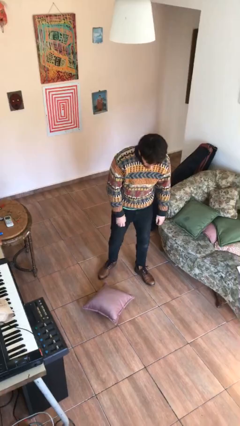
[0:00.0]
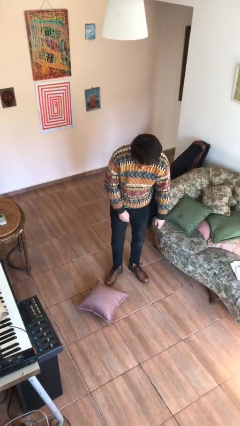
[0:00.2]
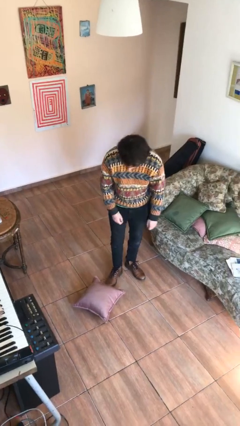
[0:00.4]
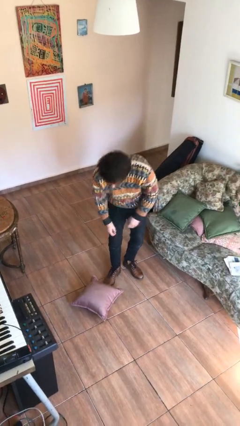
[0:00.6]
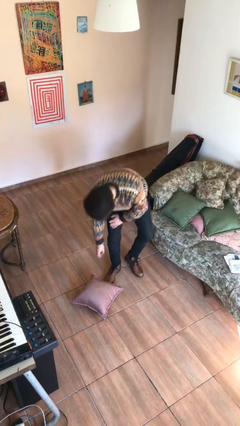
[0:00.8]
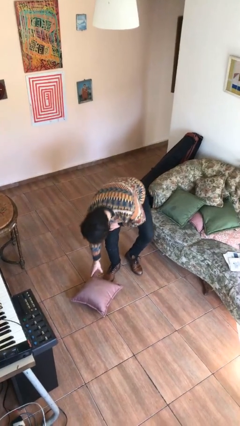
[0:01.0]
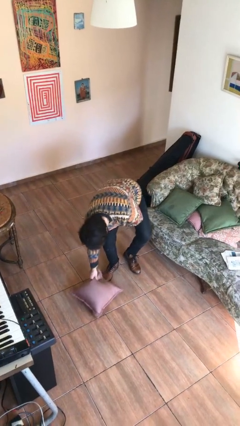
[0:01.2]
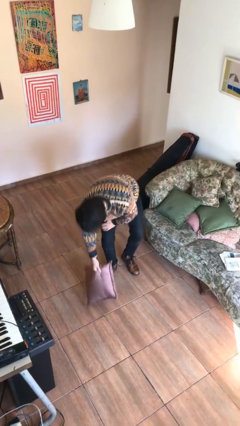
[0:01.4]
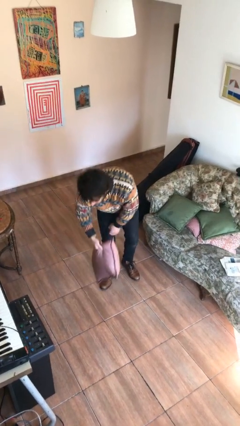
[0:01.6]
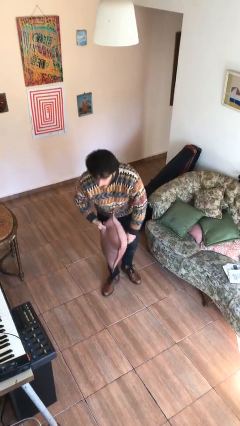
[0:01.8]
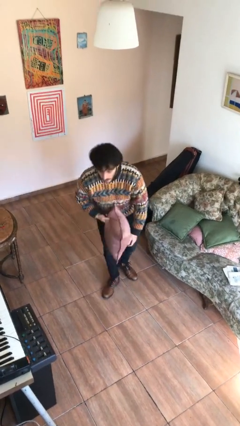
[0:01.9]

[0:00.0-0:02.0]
person picks up object from floor

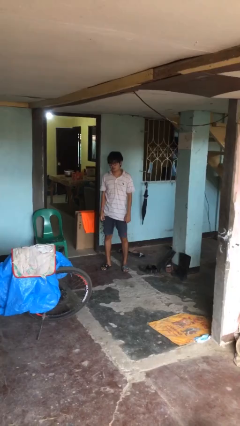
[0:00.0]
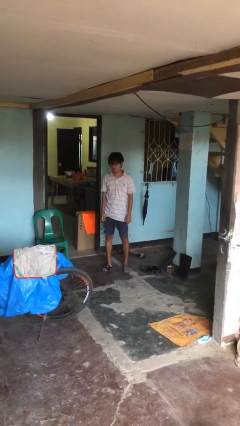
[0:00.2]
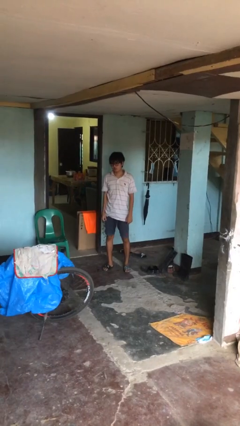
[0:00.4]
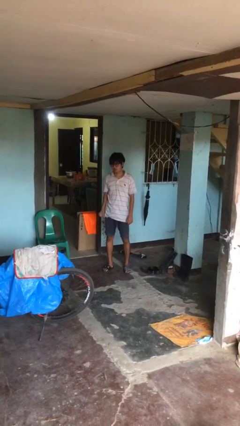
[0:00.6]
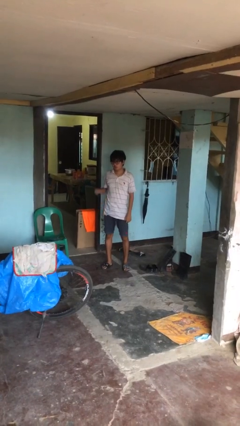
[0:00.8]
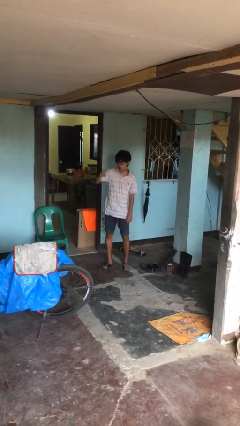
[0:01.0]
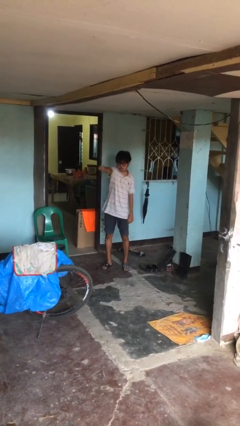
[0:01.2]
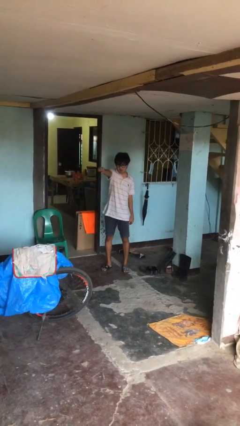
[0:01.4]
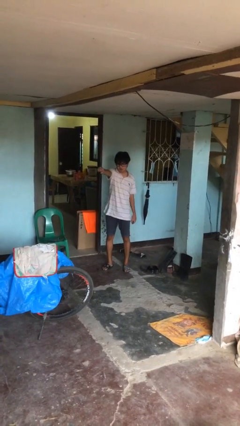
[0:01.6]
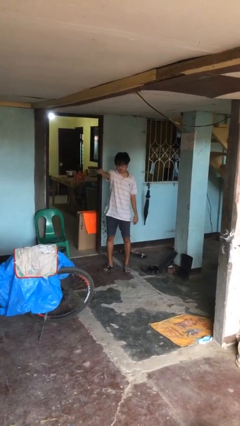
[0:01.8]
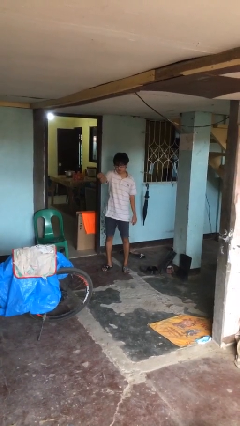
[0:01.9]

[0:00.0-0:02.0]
person punches

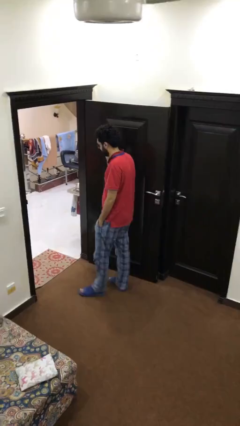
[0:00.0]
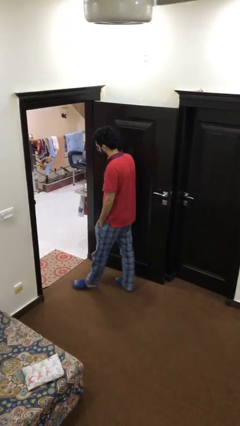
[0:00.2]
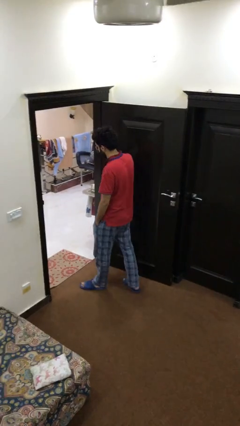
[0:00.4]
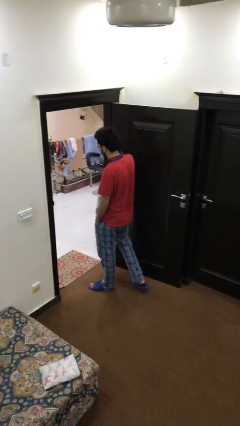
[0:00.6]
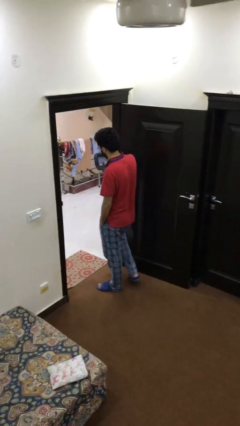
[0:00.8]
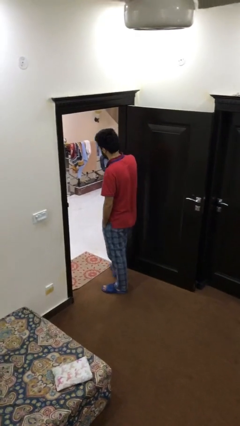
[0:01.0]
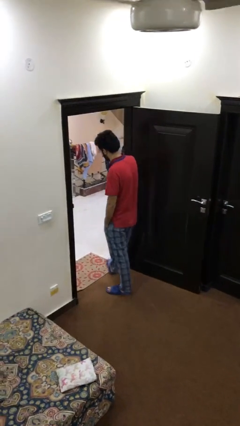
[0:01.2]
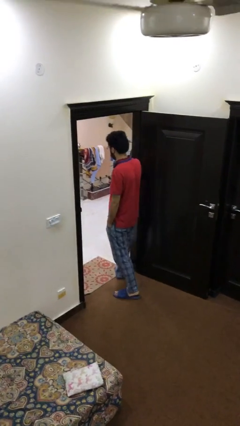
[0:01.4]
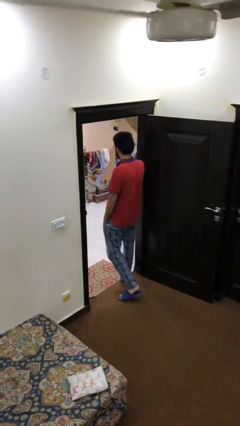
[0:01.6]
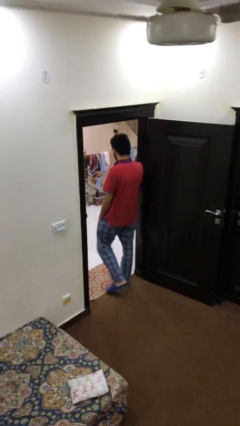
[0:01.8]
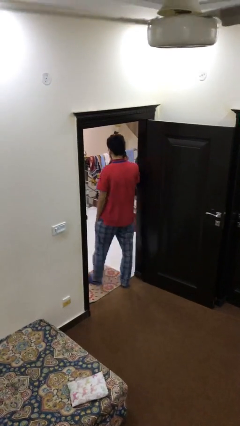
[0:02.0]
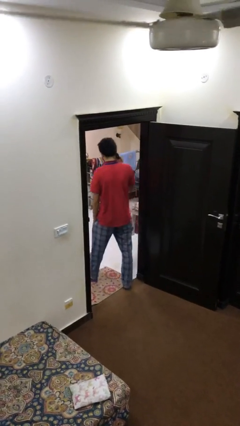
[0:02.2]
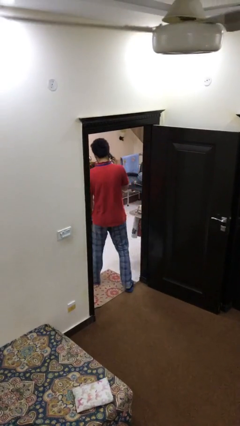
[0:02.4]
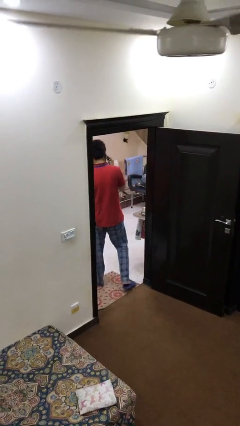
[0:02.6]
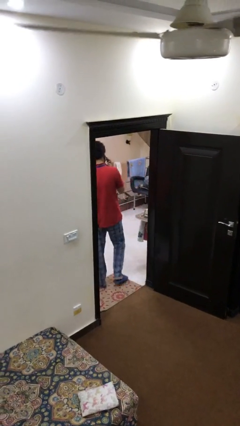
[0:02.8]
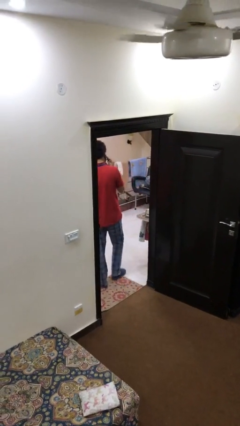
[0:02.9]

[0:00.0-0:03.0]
person exits scene through structure

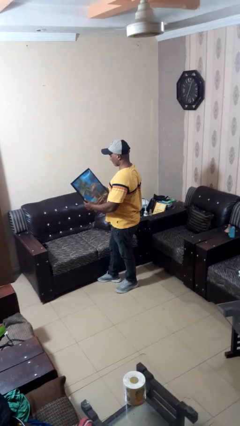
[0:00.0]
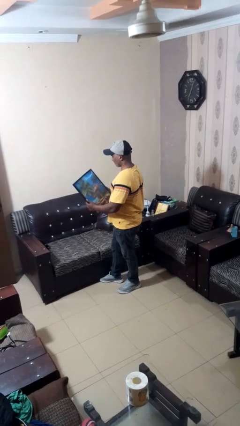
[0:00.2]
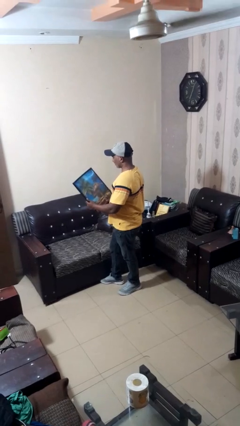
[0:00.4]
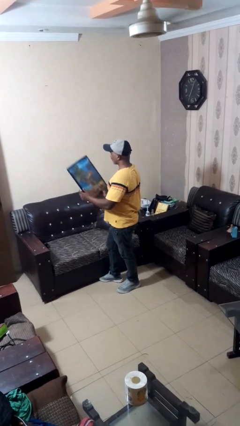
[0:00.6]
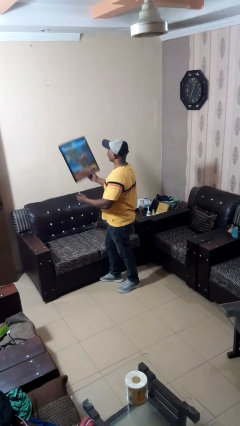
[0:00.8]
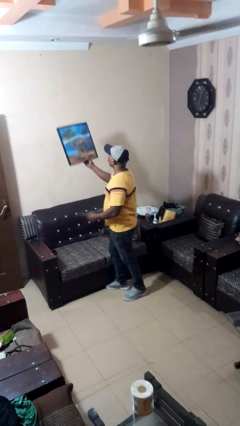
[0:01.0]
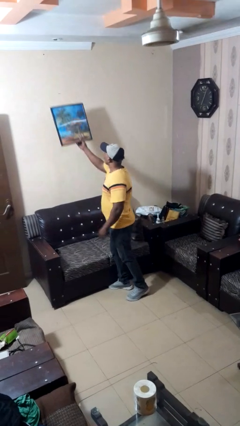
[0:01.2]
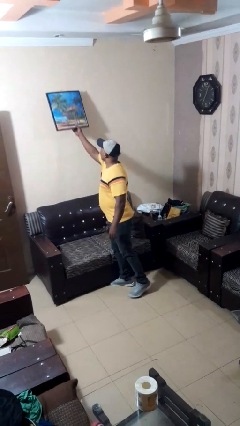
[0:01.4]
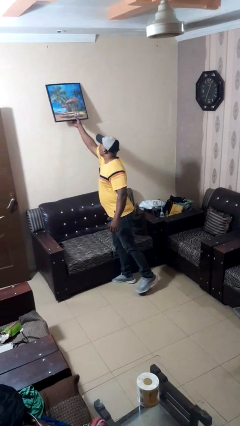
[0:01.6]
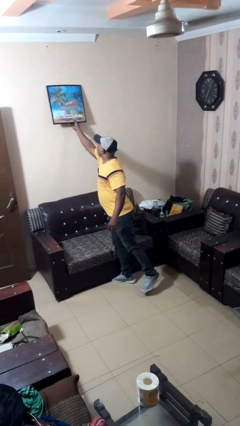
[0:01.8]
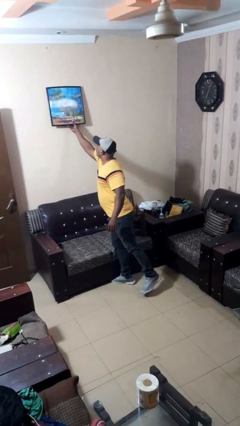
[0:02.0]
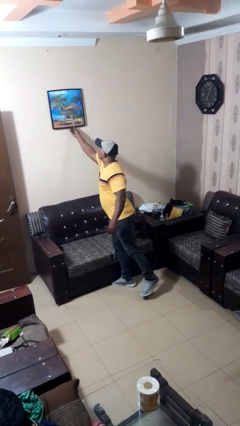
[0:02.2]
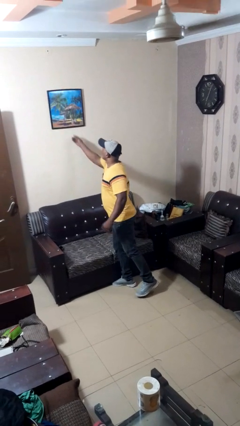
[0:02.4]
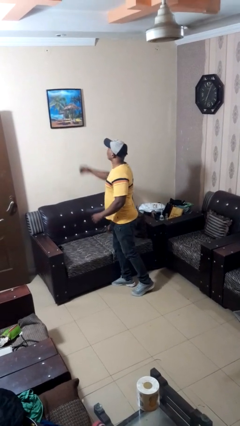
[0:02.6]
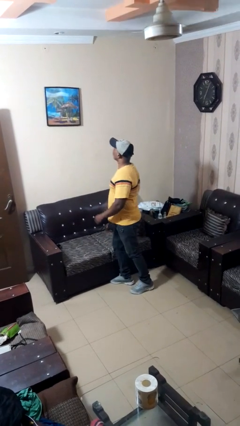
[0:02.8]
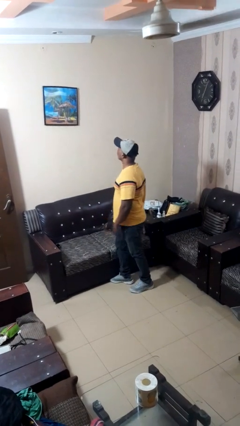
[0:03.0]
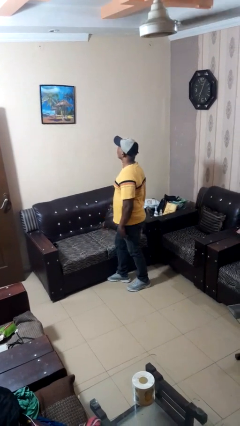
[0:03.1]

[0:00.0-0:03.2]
person puts up picture frame

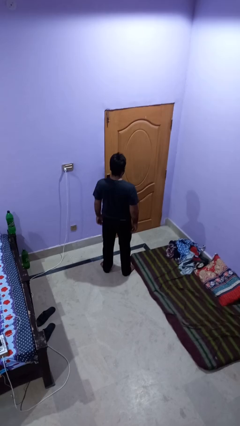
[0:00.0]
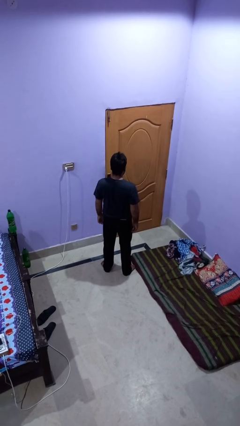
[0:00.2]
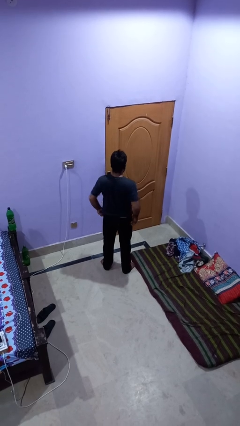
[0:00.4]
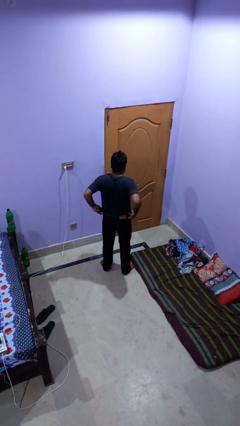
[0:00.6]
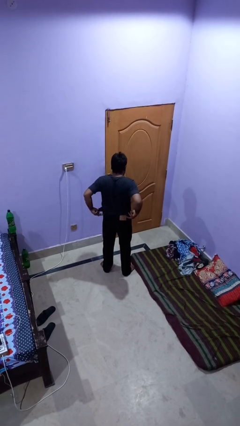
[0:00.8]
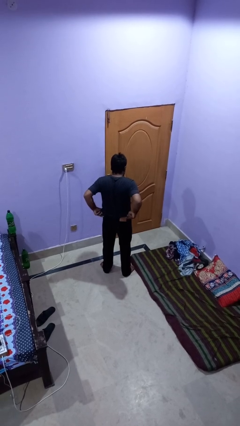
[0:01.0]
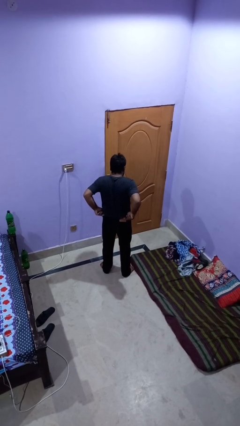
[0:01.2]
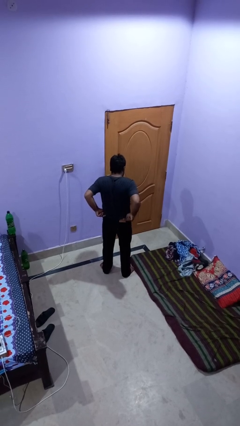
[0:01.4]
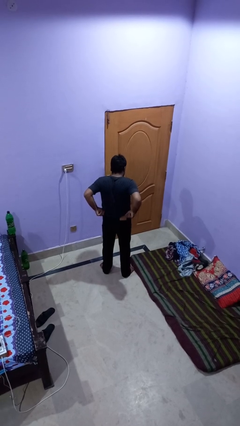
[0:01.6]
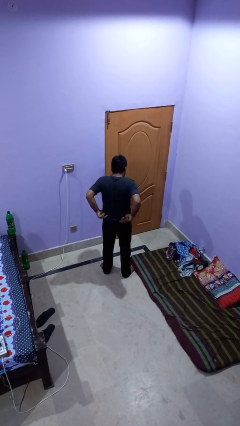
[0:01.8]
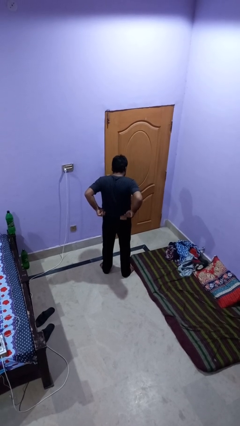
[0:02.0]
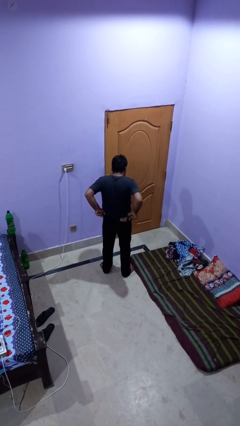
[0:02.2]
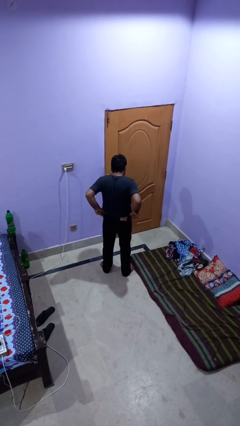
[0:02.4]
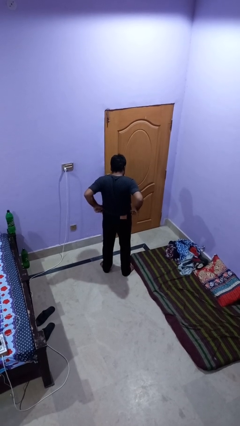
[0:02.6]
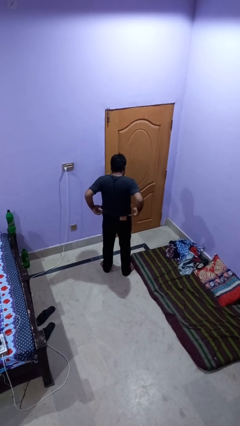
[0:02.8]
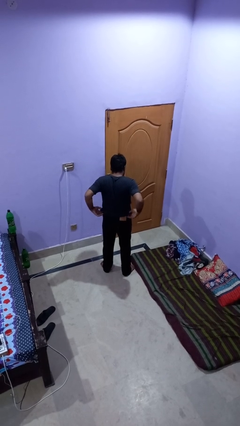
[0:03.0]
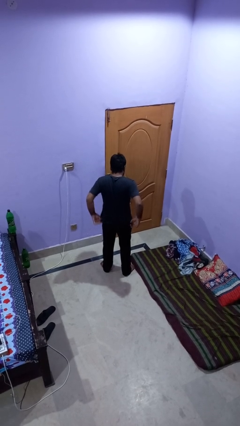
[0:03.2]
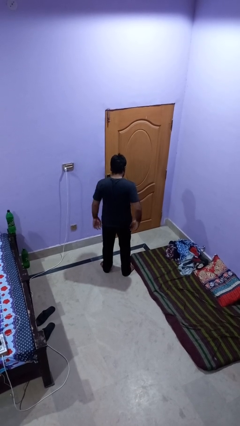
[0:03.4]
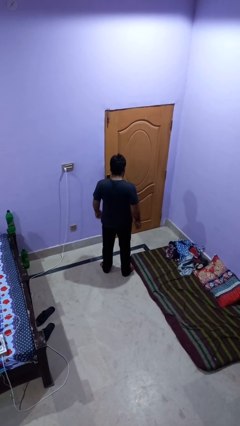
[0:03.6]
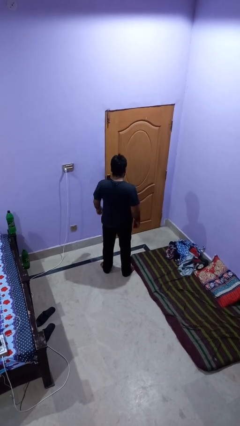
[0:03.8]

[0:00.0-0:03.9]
person hikes up pants

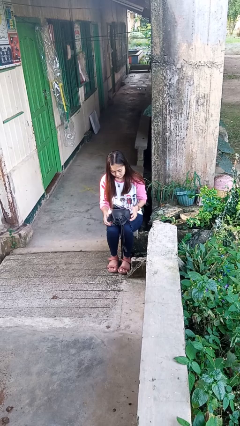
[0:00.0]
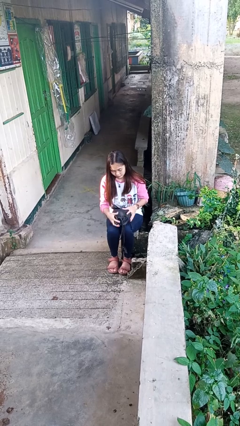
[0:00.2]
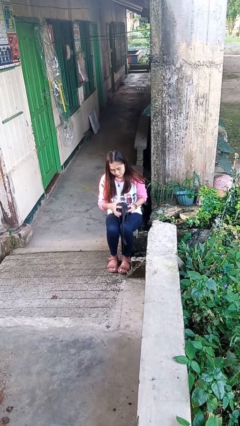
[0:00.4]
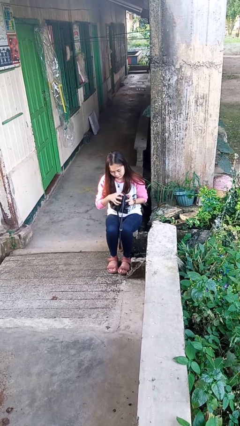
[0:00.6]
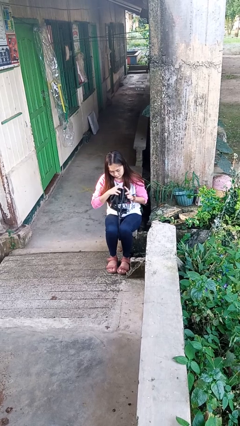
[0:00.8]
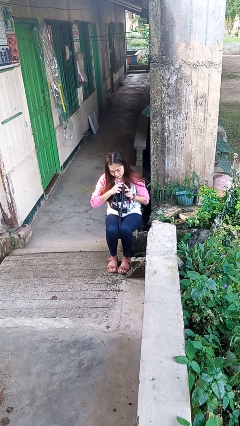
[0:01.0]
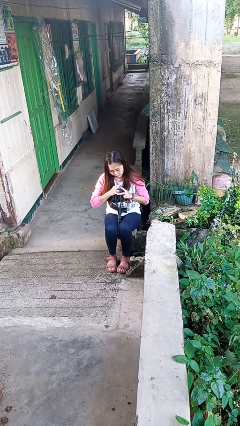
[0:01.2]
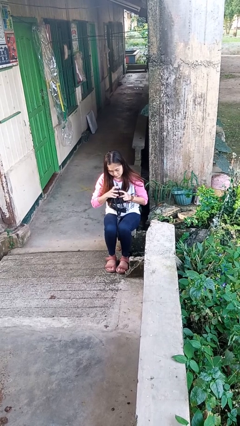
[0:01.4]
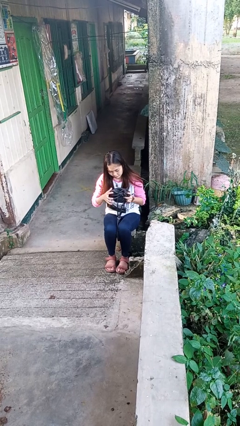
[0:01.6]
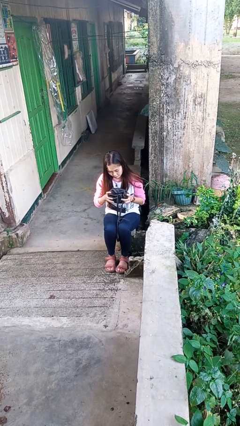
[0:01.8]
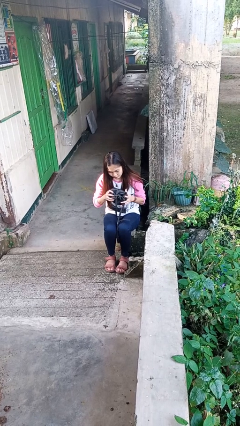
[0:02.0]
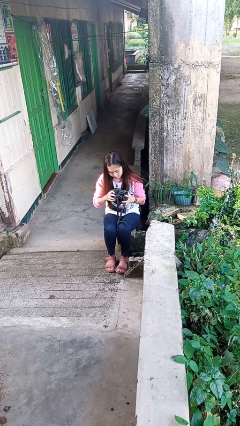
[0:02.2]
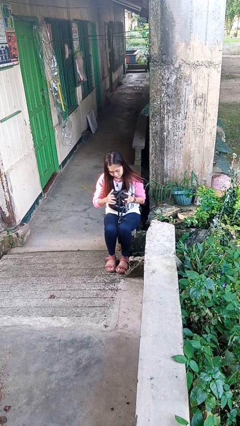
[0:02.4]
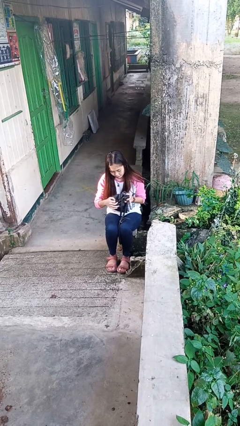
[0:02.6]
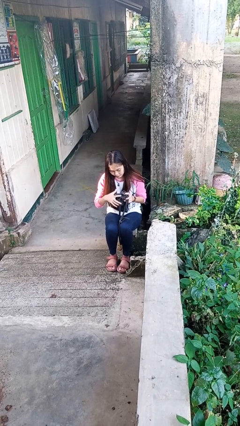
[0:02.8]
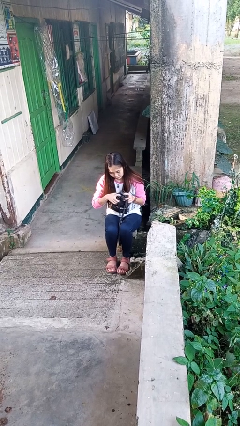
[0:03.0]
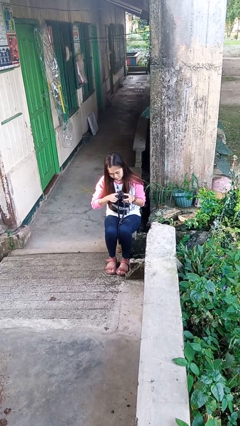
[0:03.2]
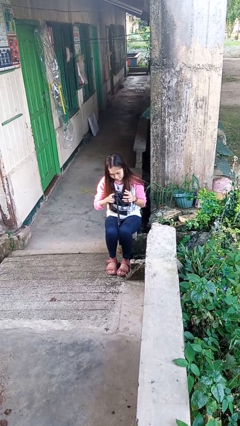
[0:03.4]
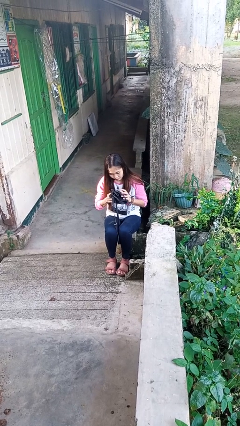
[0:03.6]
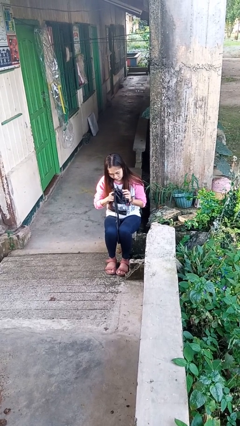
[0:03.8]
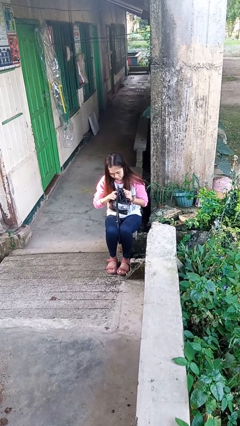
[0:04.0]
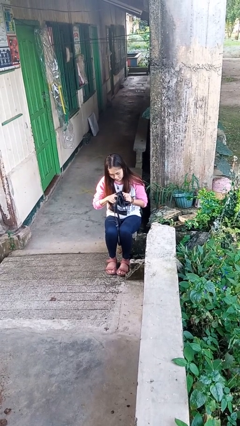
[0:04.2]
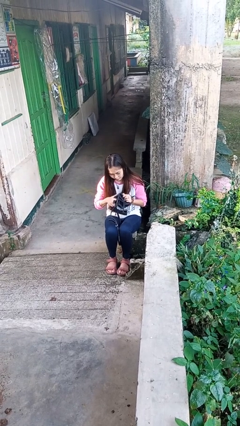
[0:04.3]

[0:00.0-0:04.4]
person squeezes object
